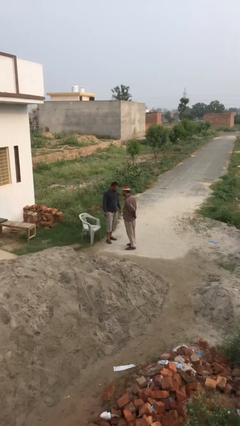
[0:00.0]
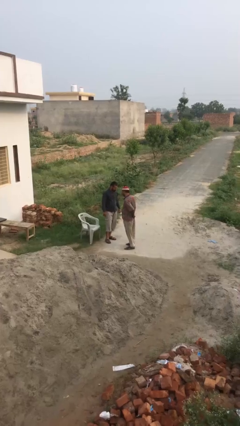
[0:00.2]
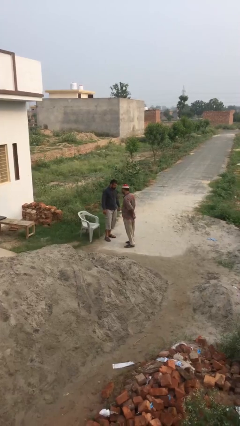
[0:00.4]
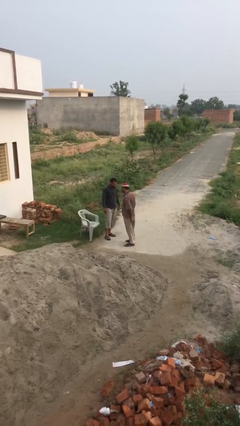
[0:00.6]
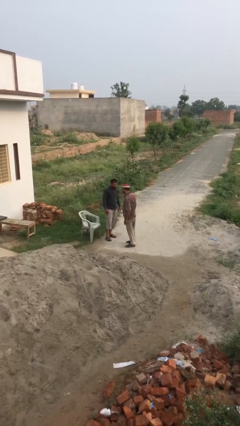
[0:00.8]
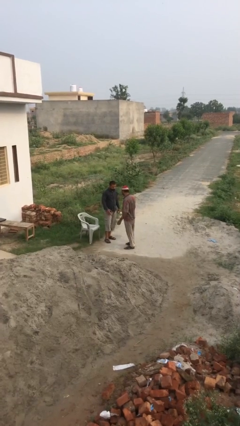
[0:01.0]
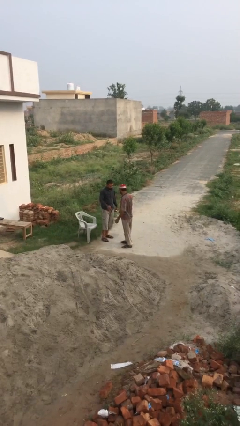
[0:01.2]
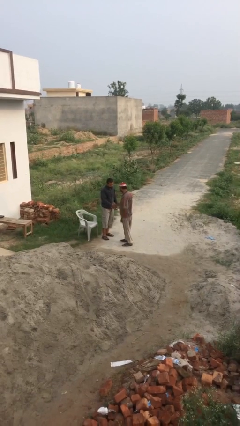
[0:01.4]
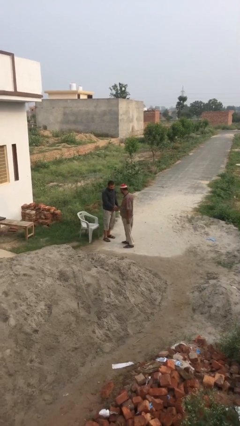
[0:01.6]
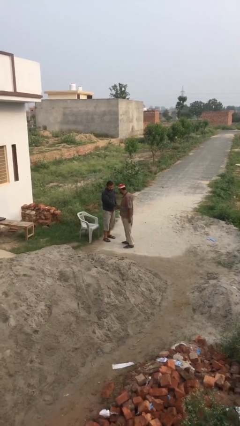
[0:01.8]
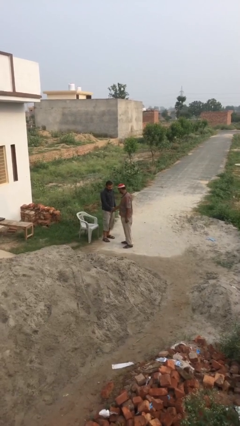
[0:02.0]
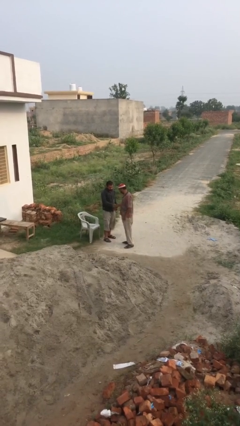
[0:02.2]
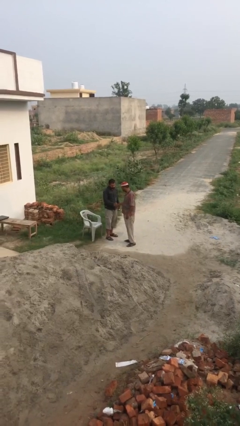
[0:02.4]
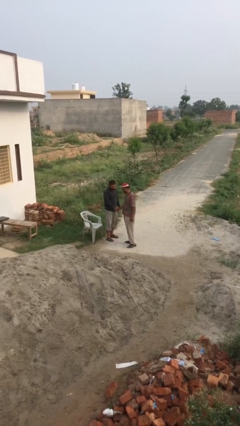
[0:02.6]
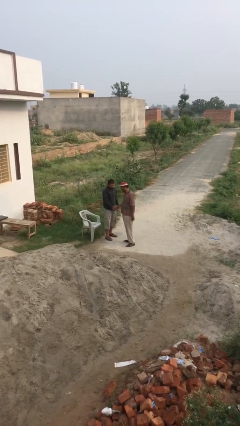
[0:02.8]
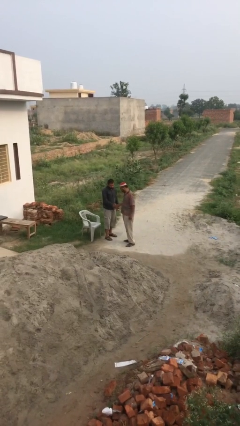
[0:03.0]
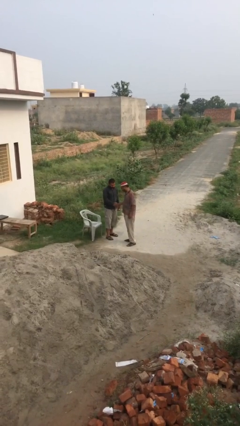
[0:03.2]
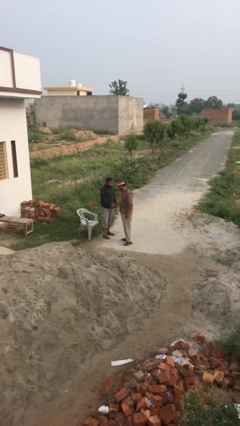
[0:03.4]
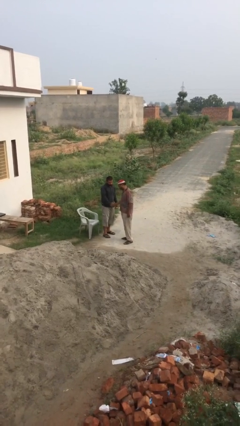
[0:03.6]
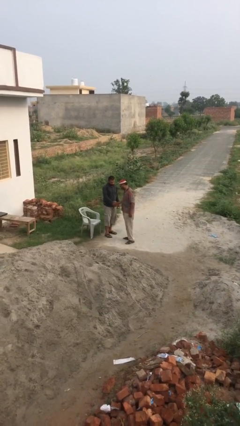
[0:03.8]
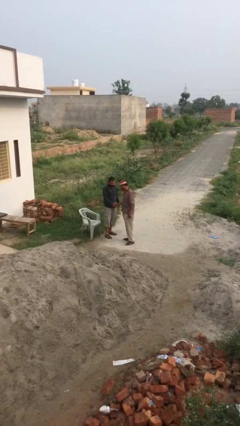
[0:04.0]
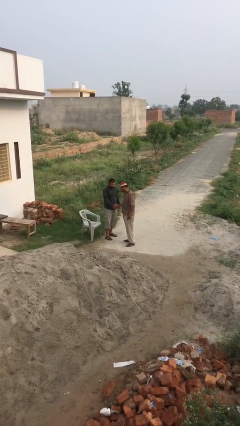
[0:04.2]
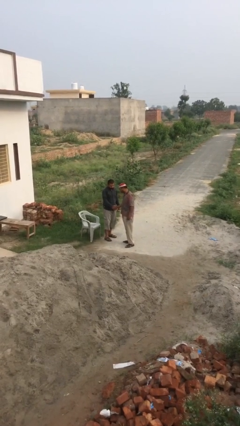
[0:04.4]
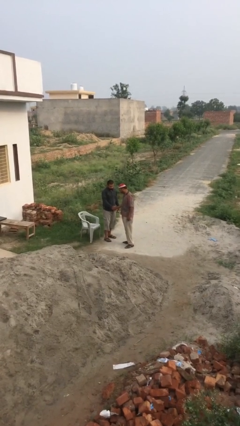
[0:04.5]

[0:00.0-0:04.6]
person shakes hand

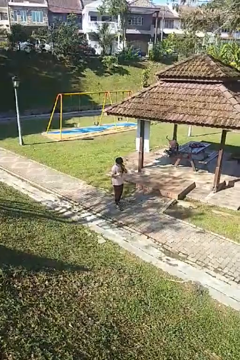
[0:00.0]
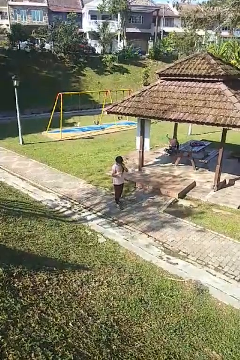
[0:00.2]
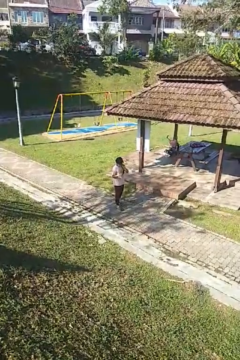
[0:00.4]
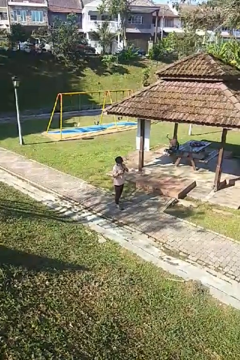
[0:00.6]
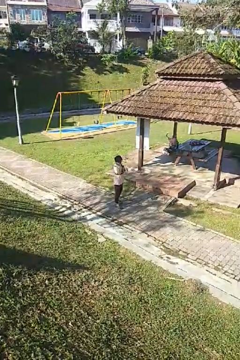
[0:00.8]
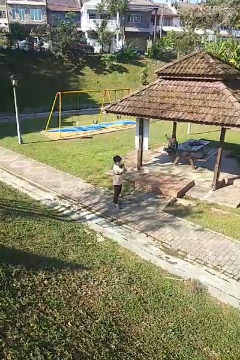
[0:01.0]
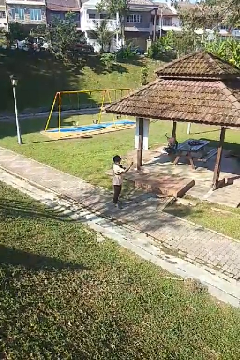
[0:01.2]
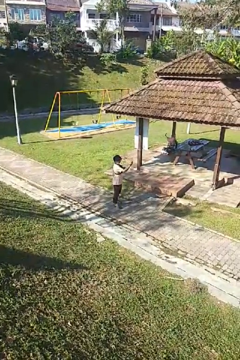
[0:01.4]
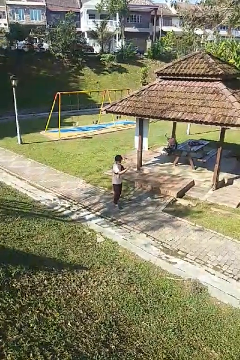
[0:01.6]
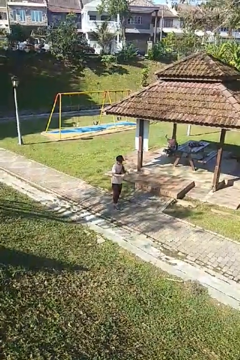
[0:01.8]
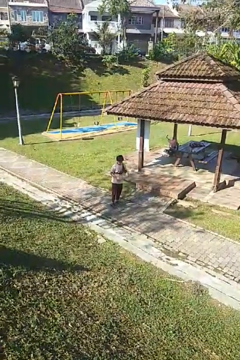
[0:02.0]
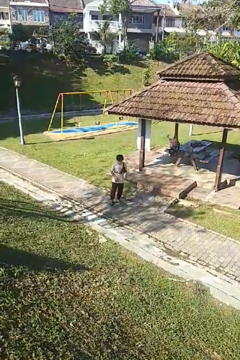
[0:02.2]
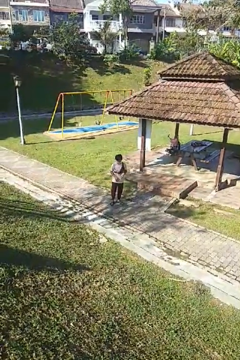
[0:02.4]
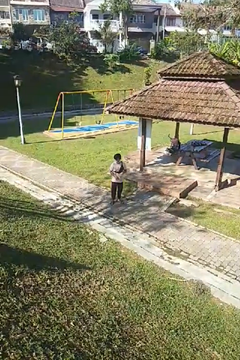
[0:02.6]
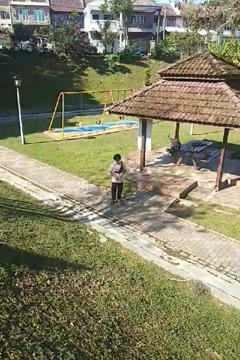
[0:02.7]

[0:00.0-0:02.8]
person karate chop

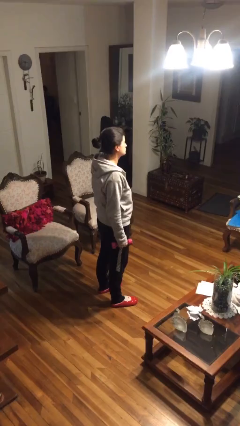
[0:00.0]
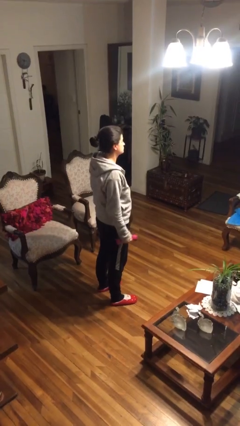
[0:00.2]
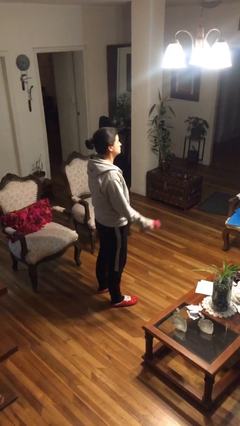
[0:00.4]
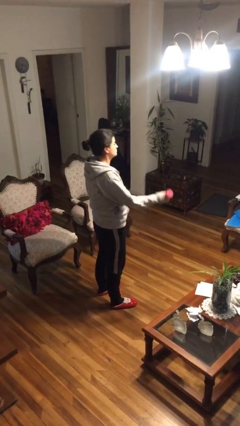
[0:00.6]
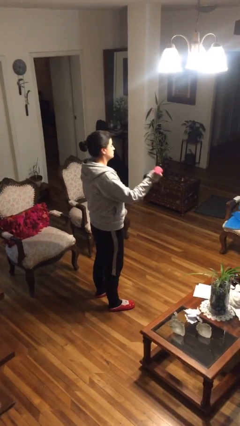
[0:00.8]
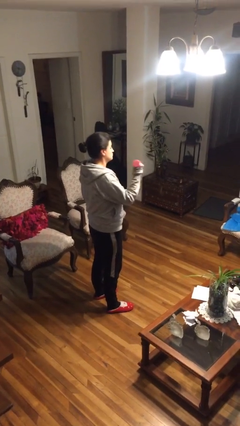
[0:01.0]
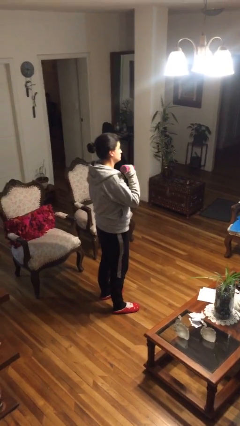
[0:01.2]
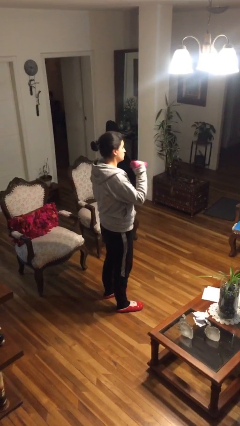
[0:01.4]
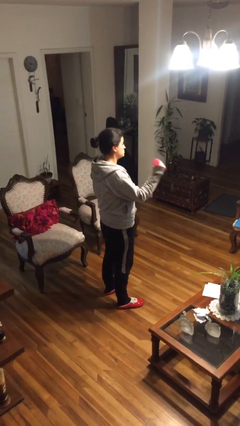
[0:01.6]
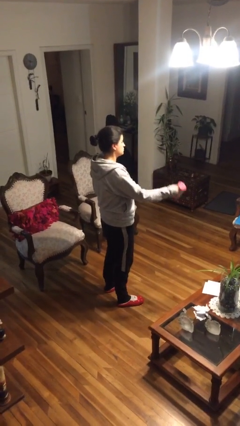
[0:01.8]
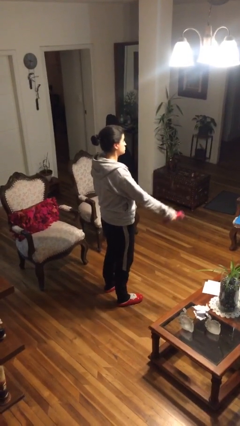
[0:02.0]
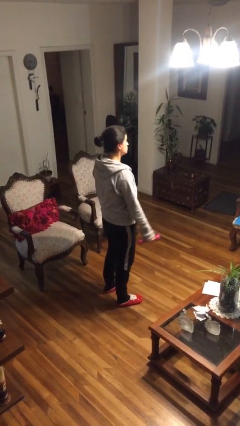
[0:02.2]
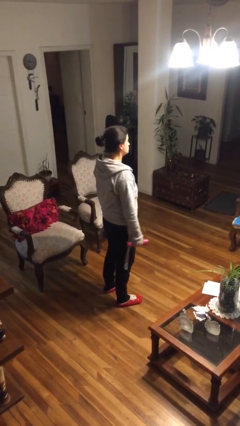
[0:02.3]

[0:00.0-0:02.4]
person lifts dumbbells
